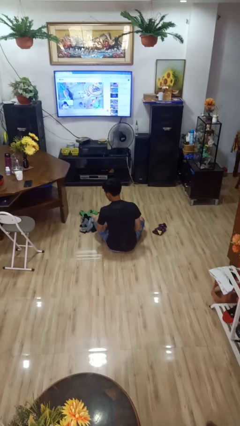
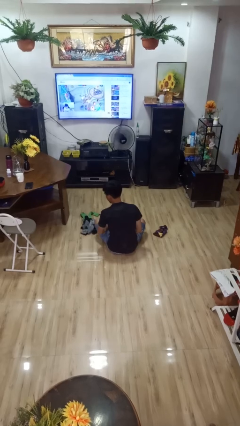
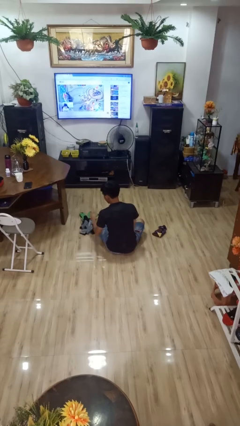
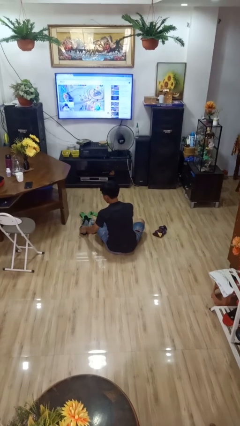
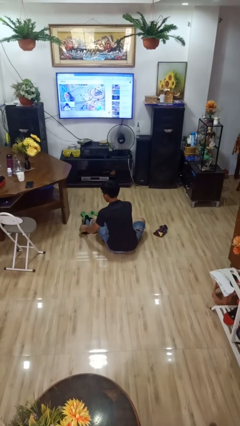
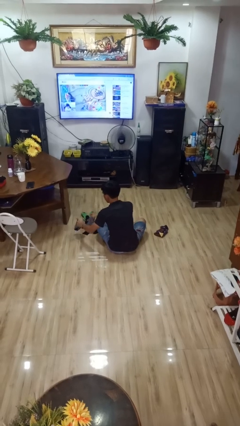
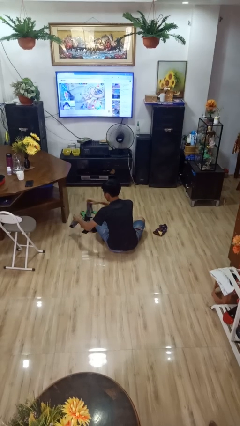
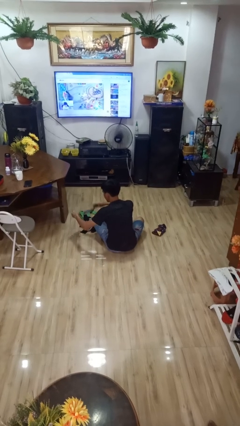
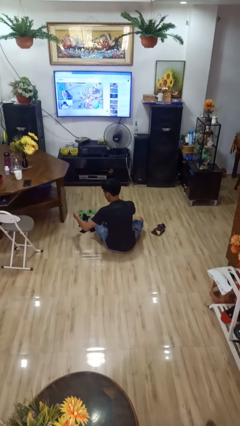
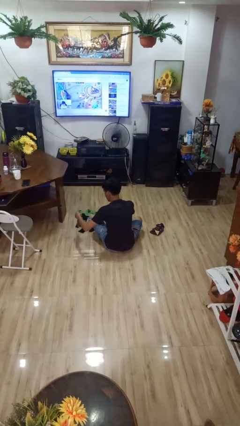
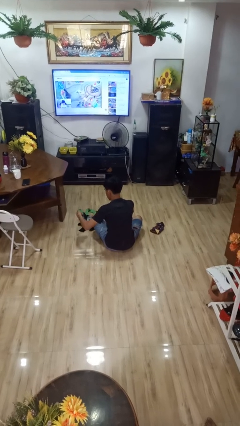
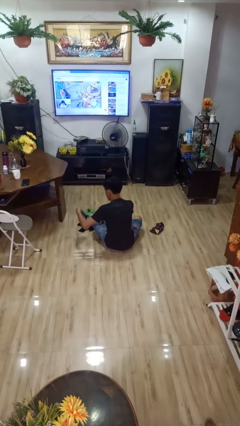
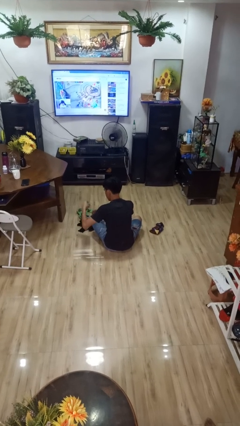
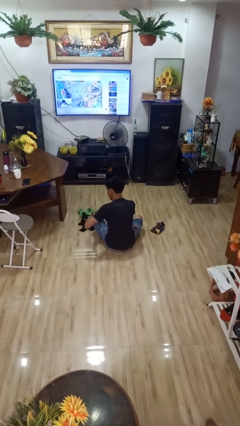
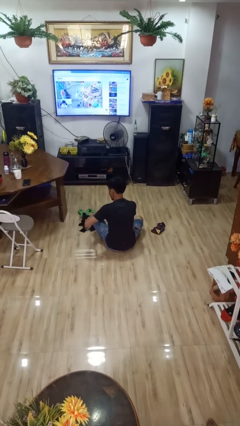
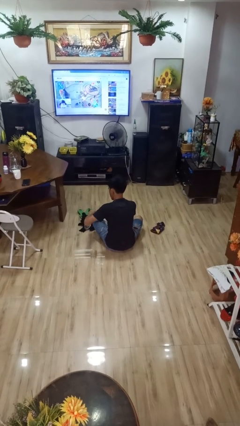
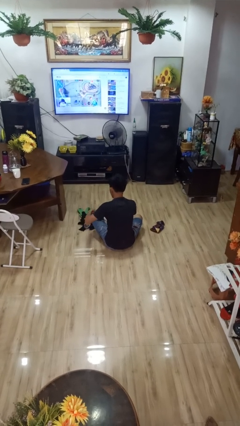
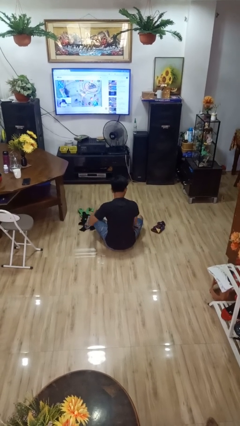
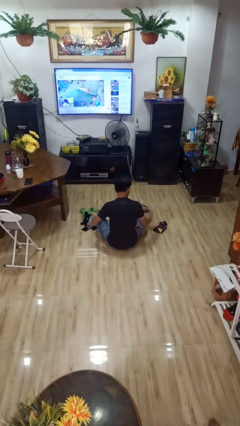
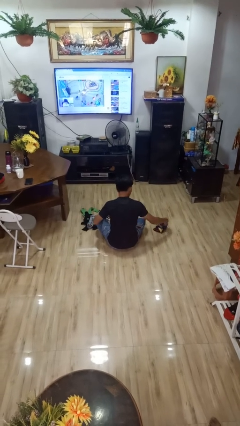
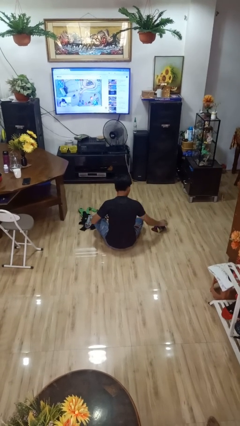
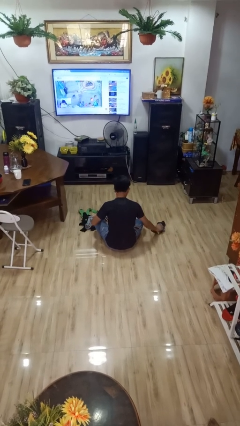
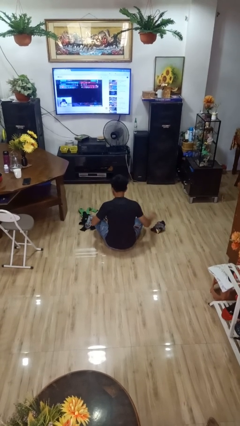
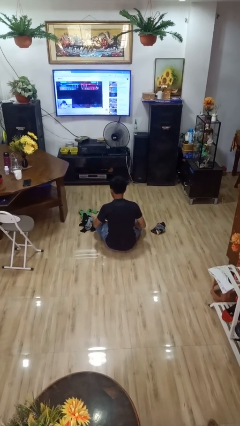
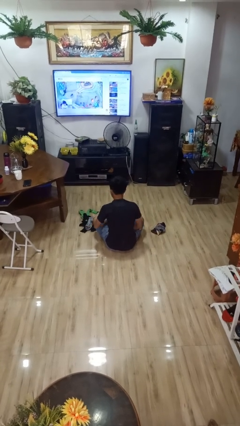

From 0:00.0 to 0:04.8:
person folds socks

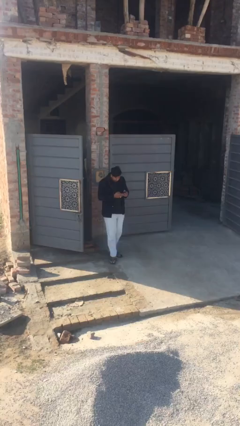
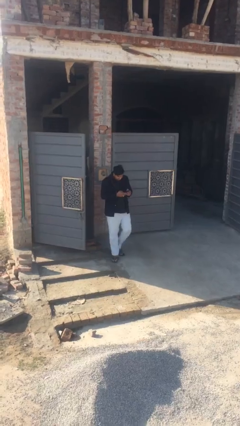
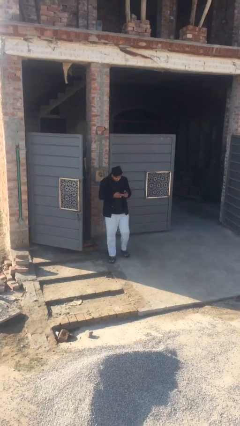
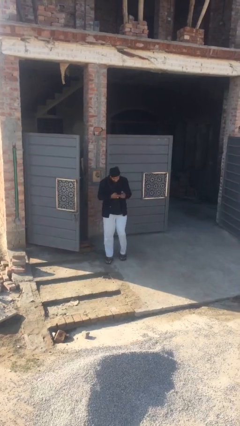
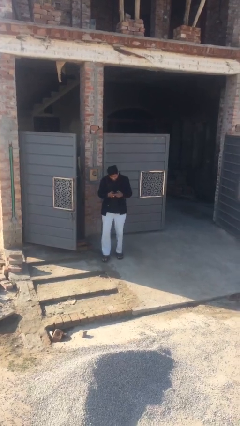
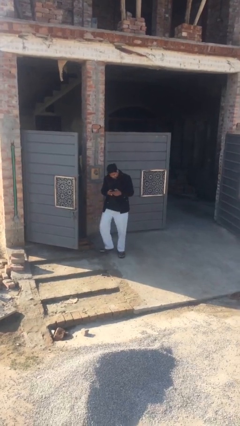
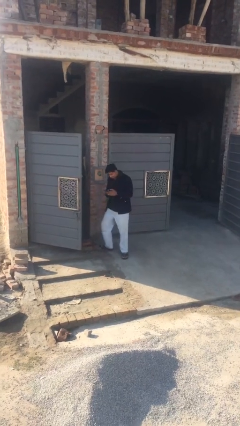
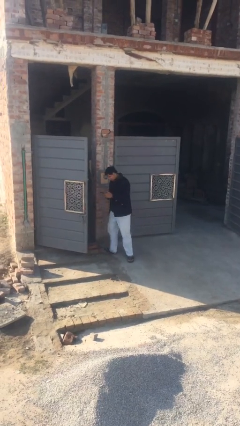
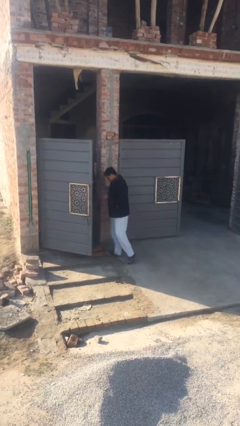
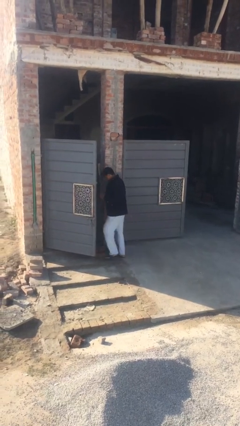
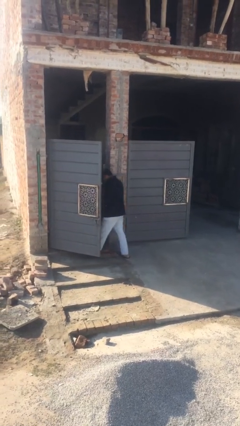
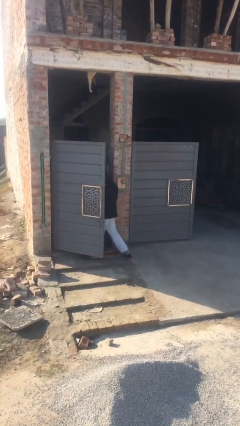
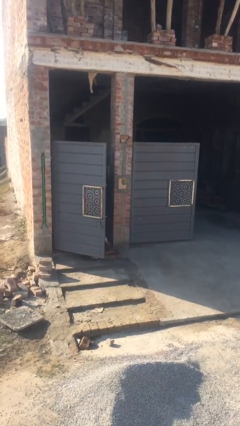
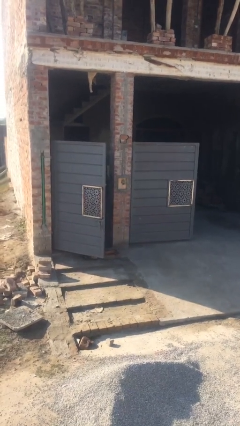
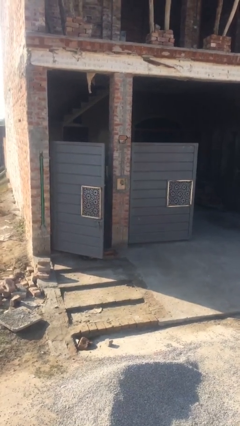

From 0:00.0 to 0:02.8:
person exits scene through structure

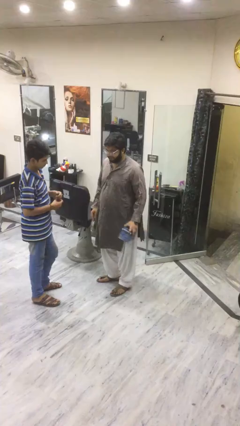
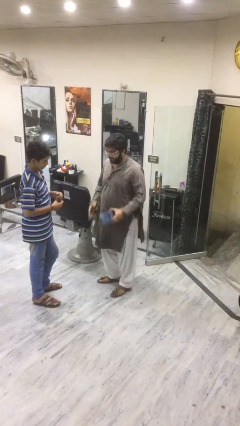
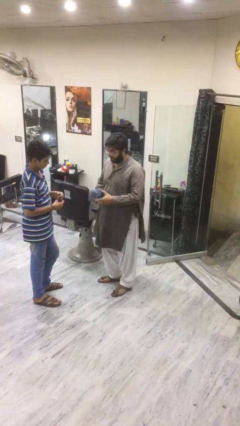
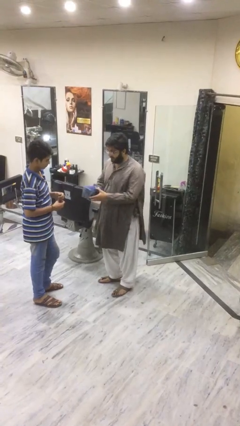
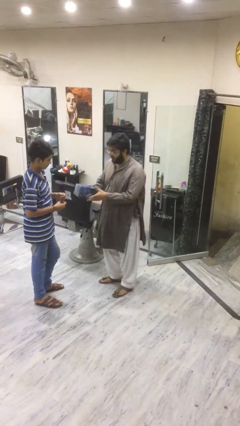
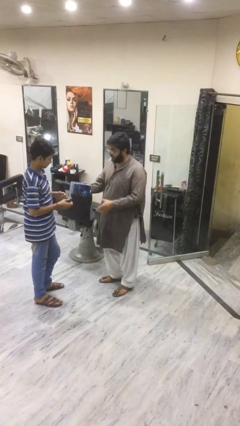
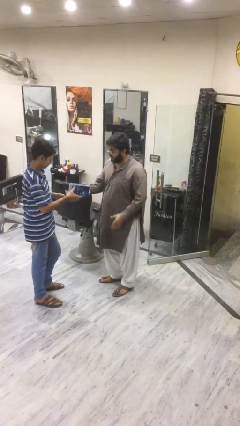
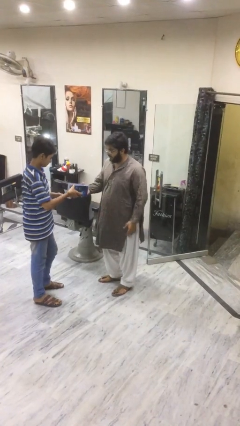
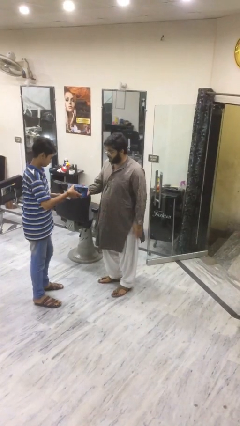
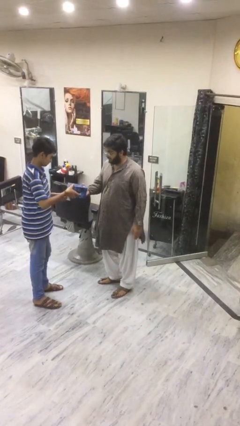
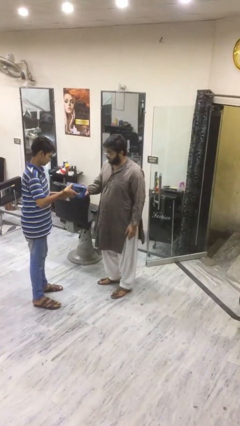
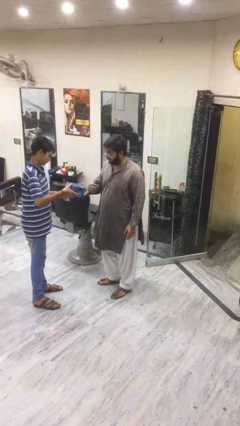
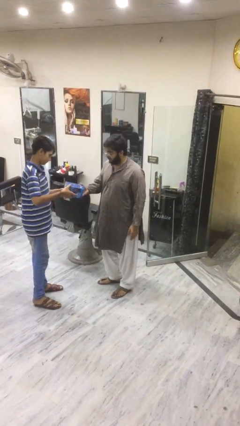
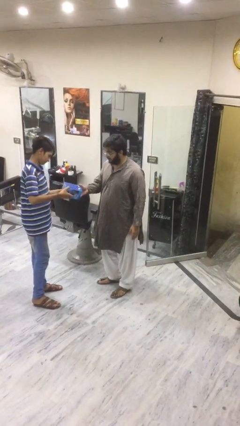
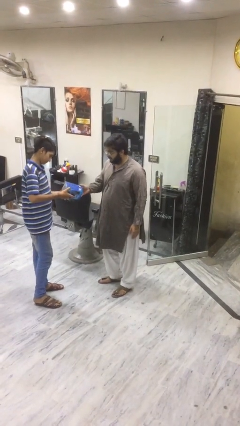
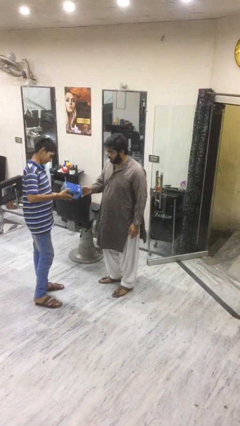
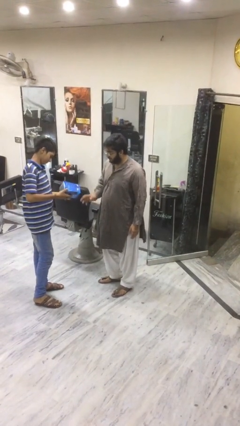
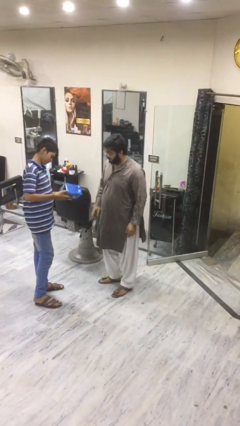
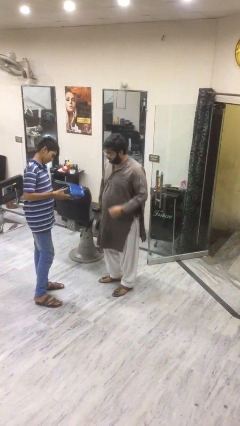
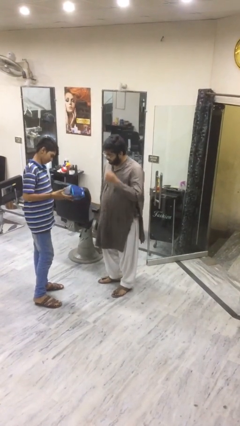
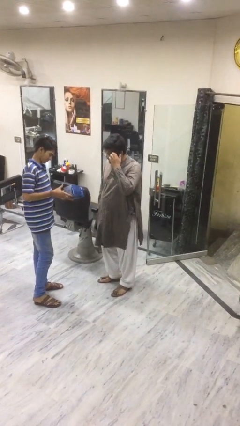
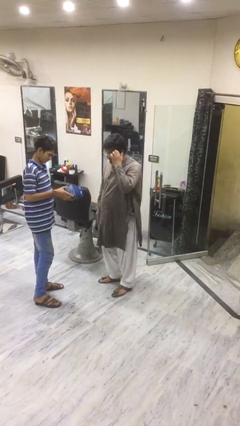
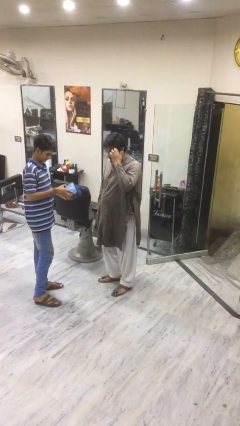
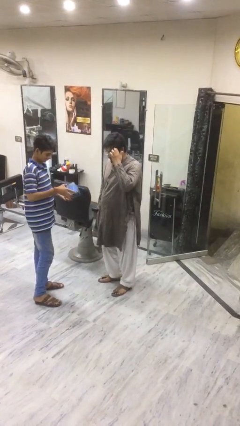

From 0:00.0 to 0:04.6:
person transfers object to person

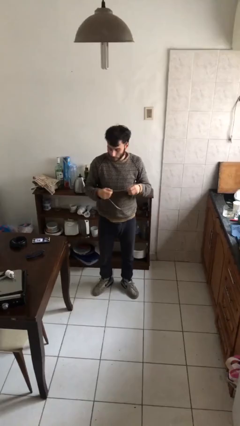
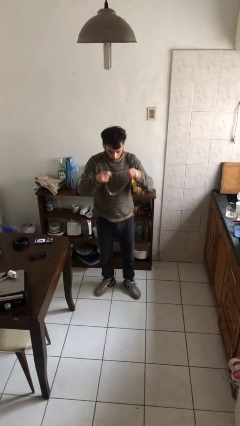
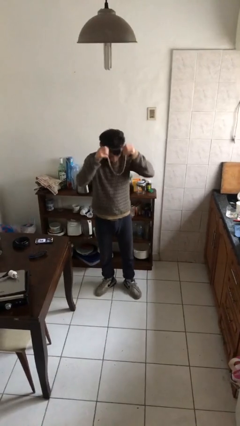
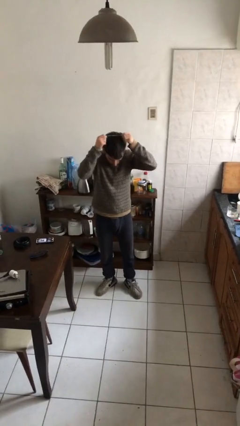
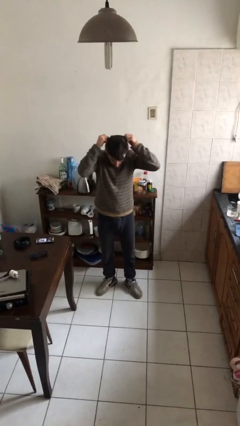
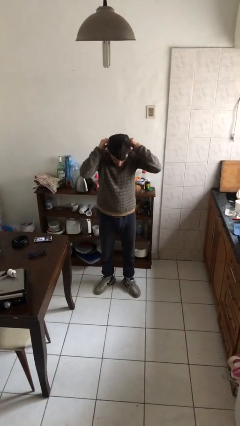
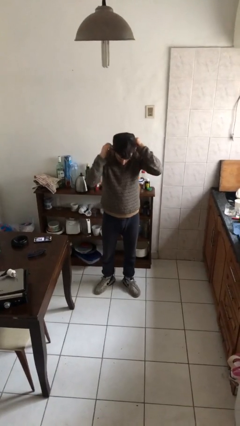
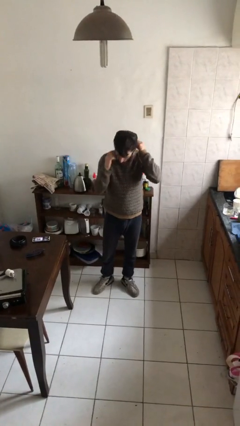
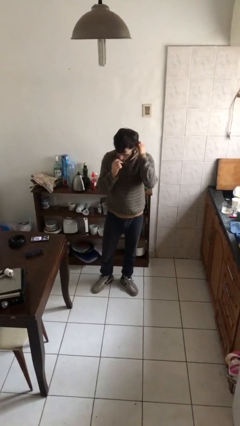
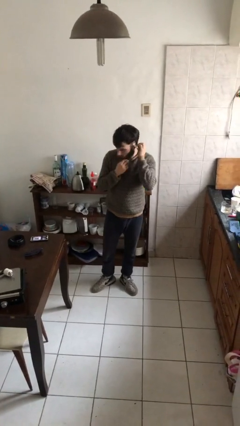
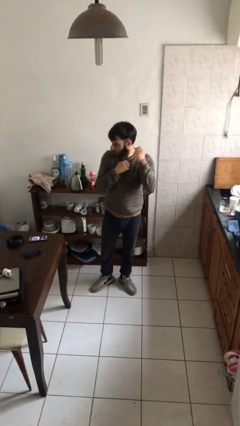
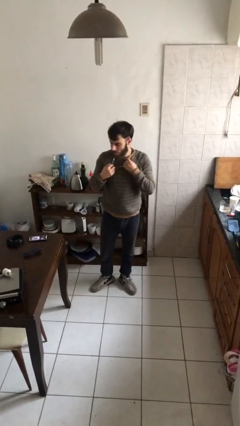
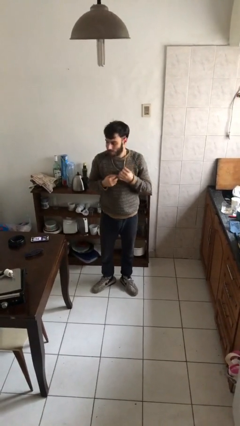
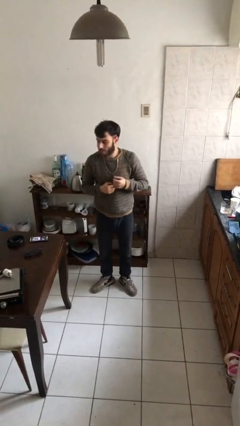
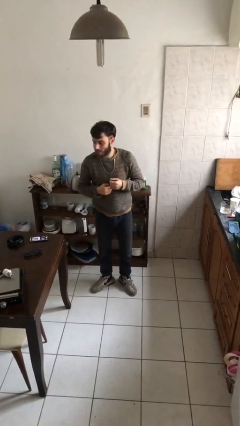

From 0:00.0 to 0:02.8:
person puts on necklace

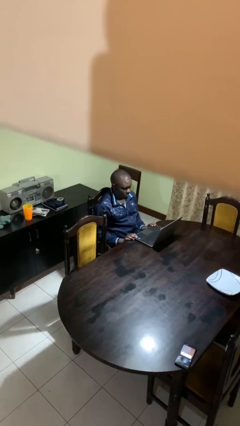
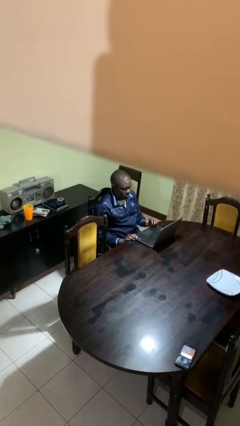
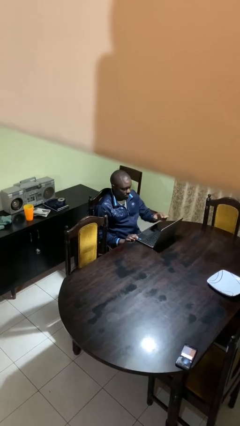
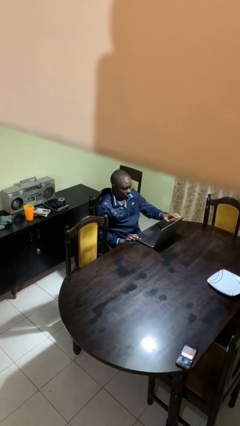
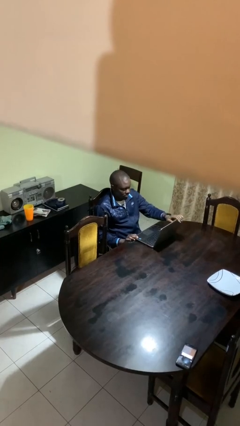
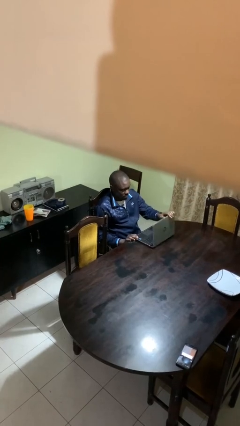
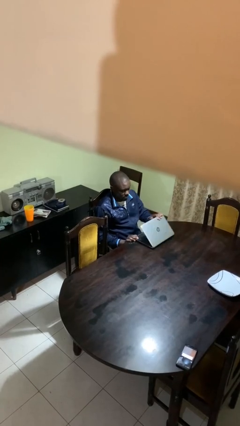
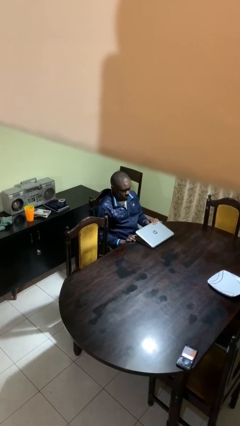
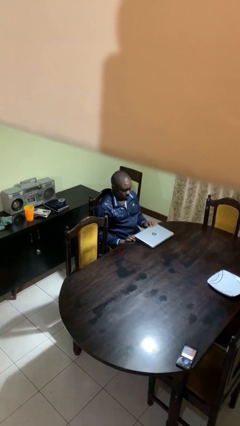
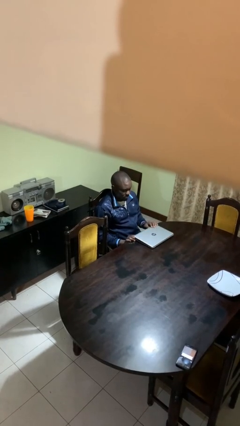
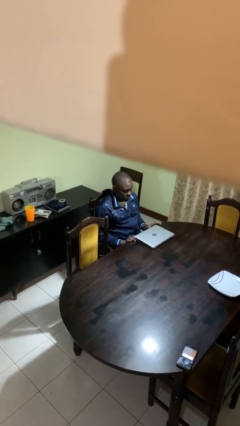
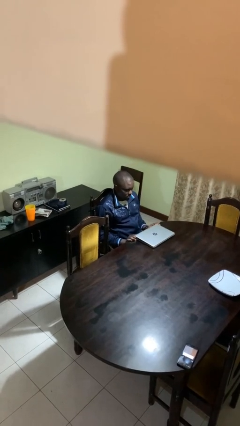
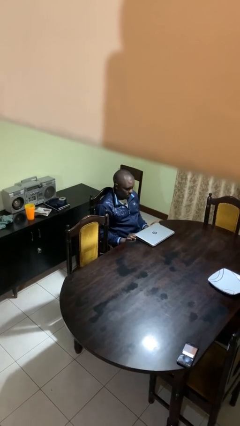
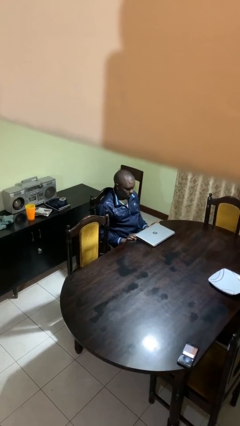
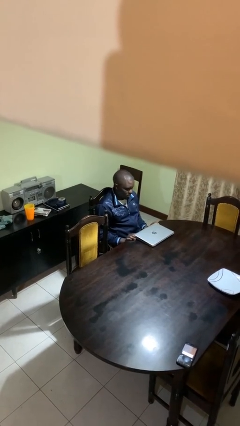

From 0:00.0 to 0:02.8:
person closes laptop
